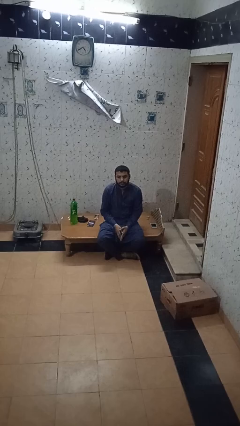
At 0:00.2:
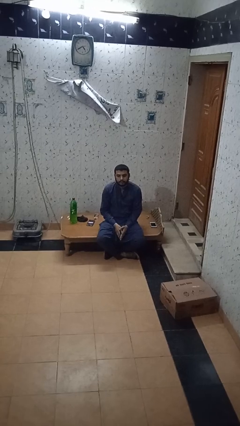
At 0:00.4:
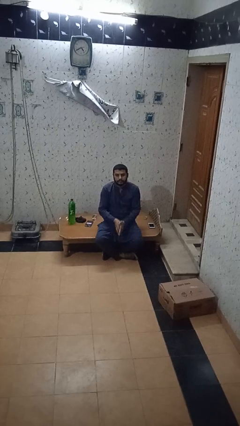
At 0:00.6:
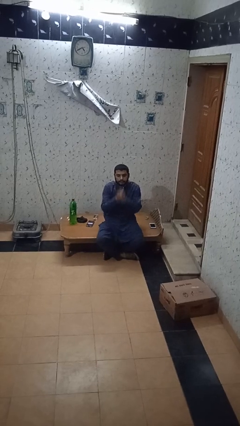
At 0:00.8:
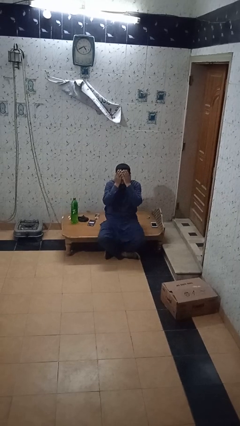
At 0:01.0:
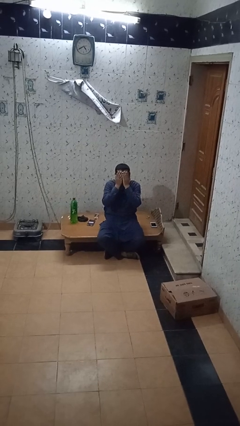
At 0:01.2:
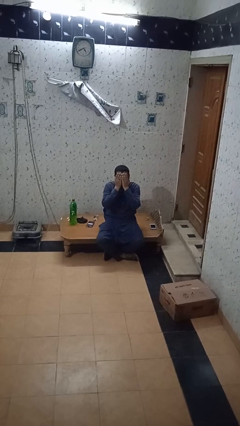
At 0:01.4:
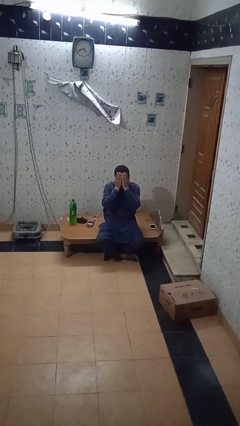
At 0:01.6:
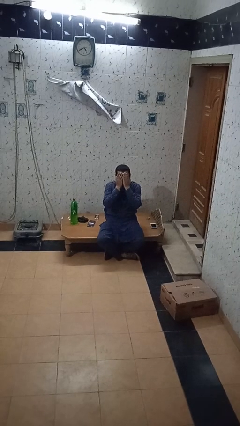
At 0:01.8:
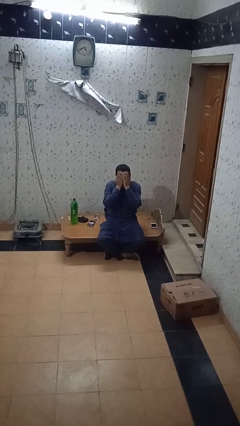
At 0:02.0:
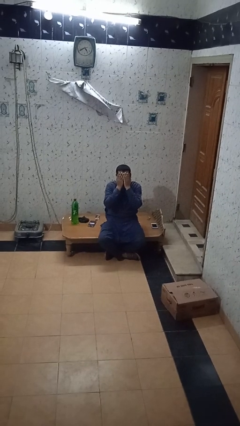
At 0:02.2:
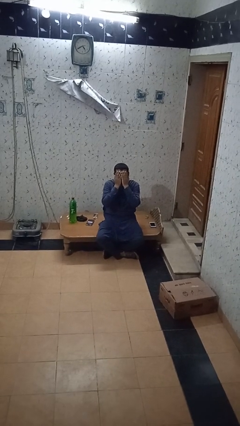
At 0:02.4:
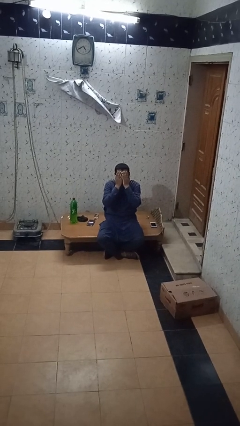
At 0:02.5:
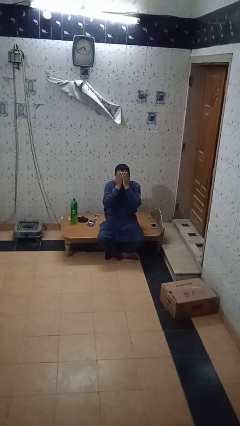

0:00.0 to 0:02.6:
person covers face with hands

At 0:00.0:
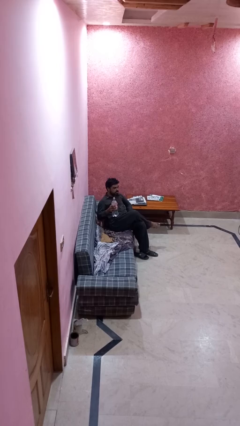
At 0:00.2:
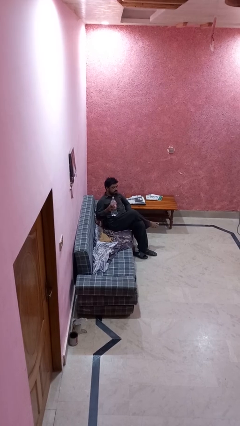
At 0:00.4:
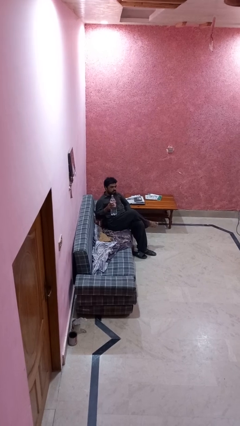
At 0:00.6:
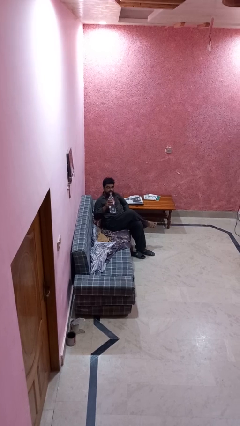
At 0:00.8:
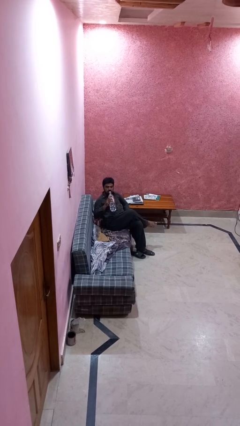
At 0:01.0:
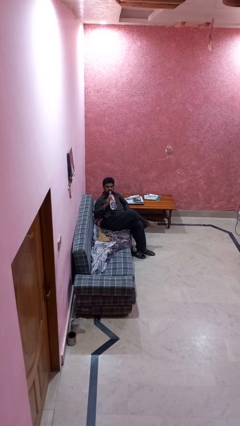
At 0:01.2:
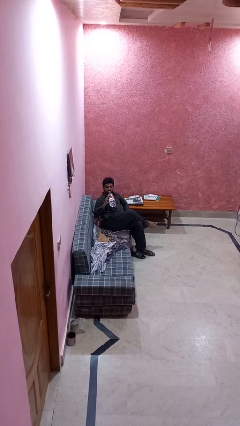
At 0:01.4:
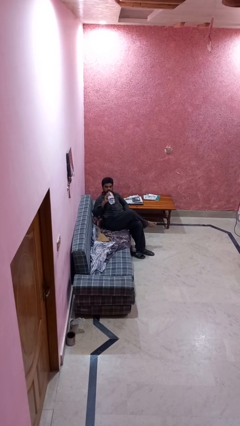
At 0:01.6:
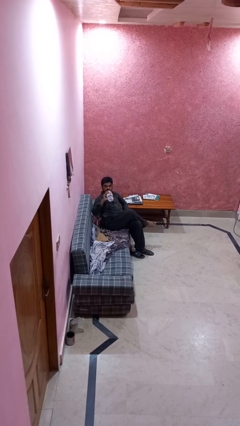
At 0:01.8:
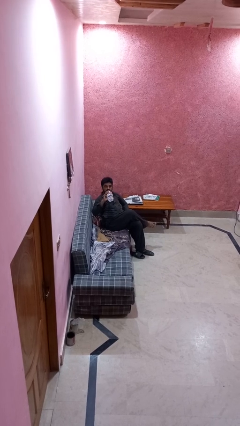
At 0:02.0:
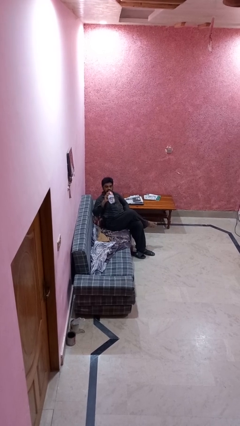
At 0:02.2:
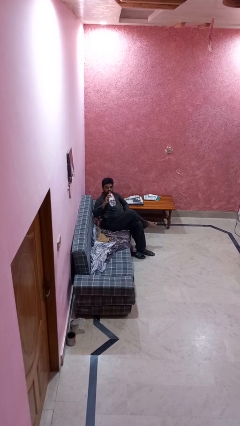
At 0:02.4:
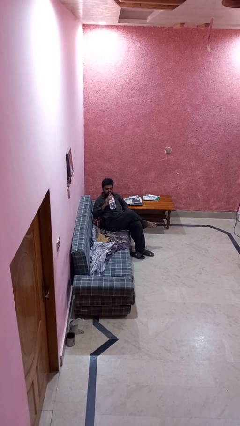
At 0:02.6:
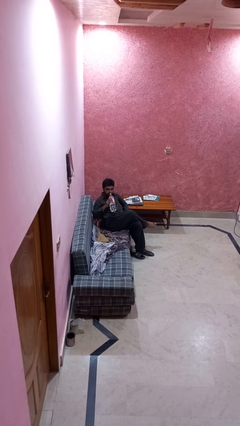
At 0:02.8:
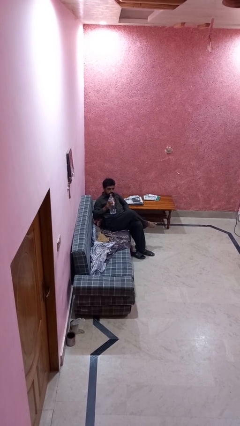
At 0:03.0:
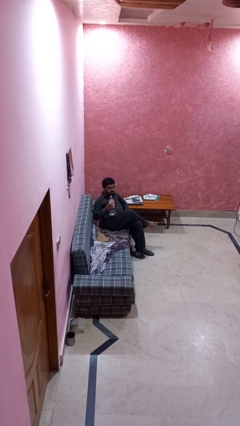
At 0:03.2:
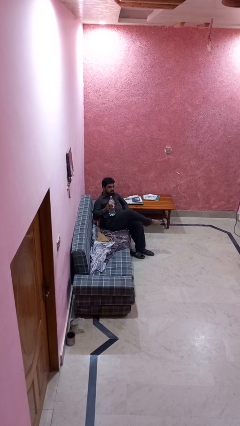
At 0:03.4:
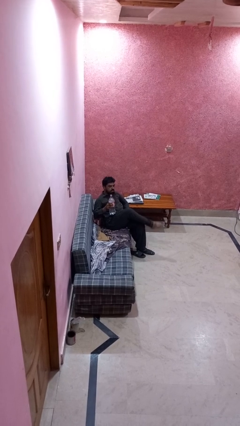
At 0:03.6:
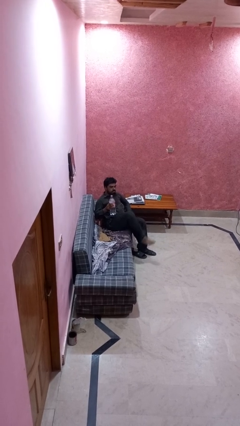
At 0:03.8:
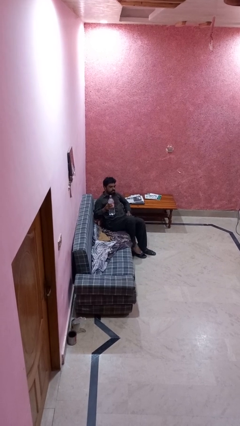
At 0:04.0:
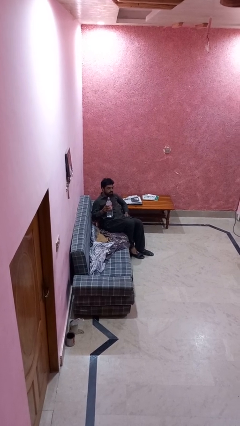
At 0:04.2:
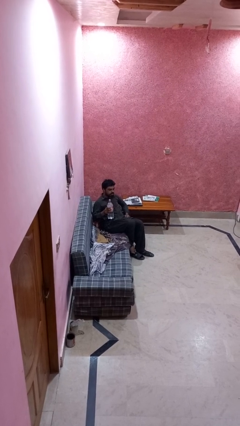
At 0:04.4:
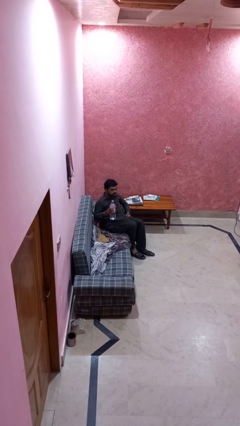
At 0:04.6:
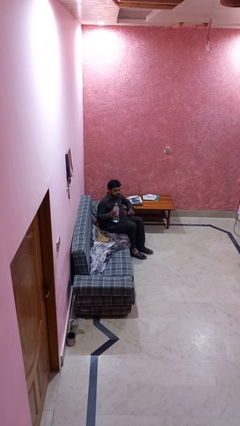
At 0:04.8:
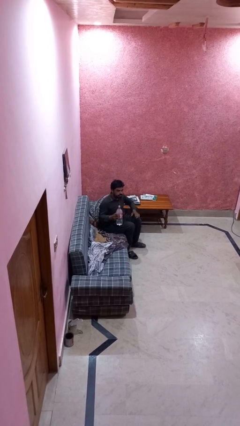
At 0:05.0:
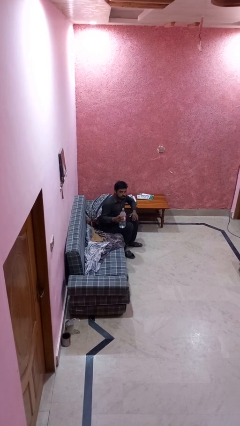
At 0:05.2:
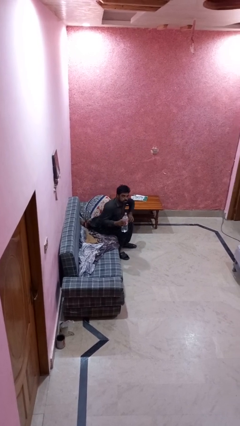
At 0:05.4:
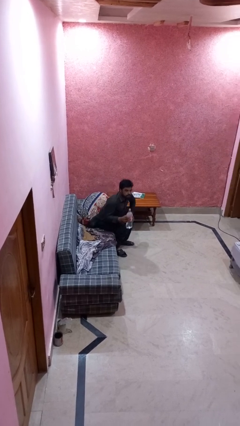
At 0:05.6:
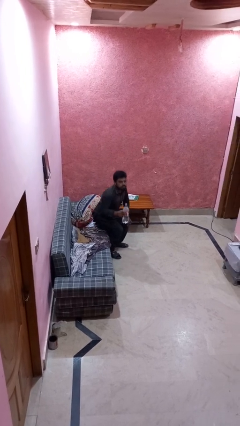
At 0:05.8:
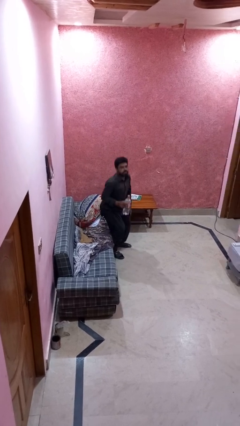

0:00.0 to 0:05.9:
person drinks from bottle

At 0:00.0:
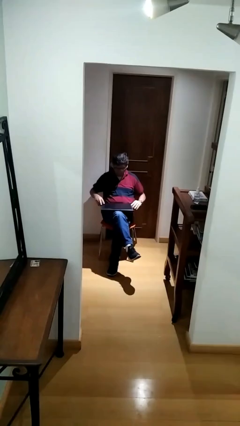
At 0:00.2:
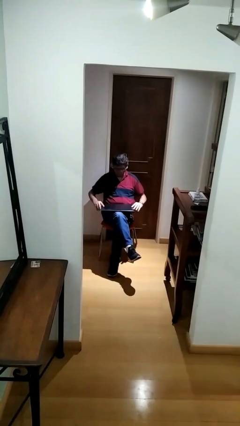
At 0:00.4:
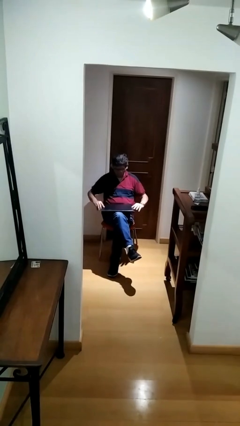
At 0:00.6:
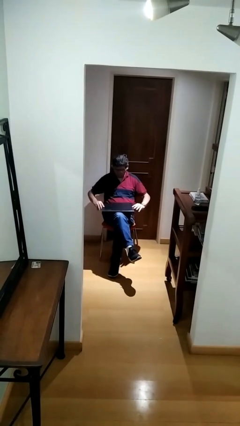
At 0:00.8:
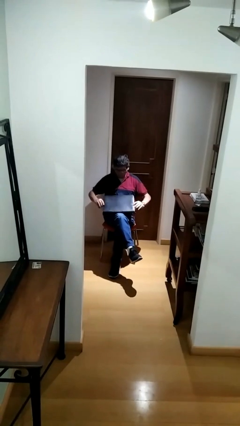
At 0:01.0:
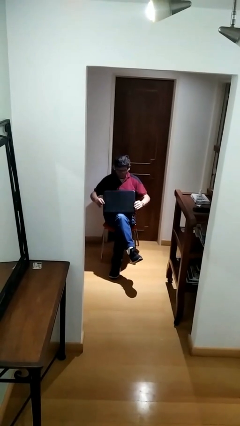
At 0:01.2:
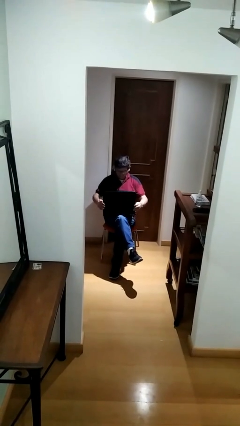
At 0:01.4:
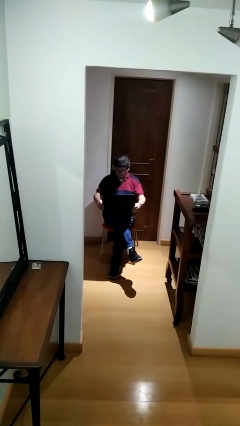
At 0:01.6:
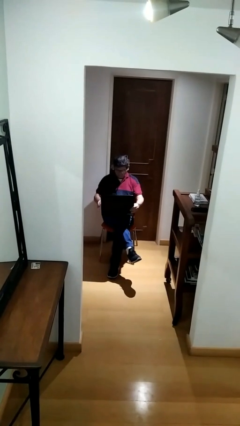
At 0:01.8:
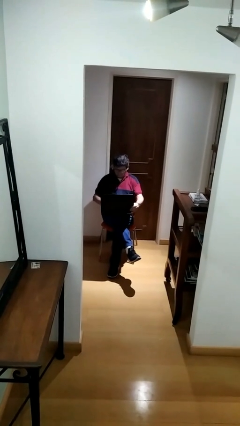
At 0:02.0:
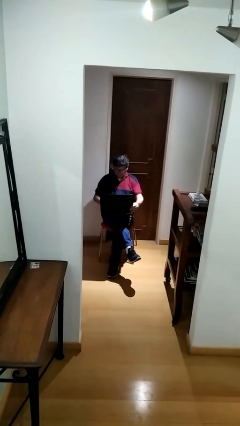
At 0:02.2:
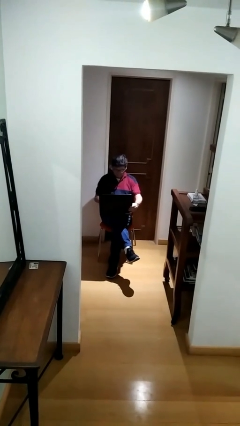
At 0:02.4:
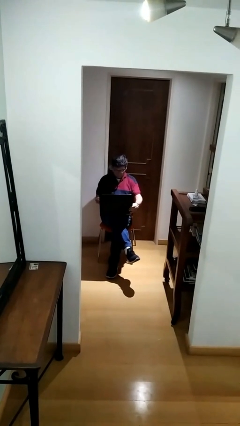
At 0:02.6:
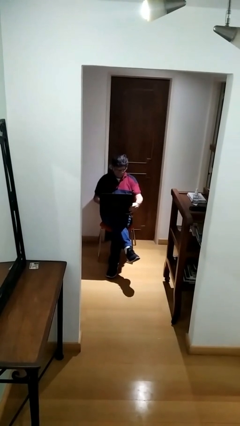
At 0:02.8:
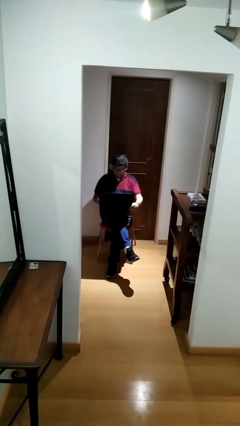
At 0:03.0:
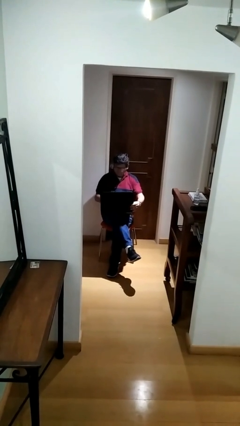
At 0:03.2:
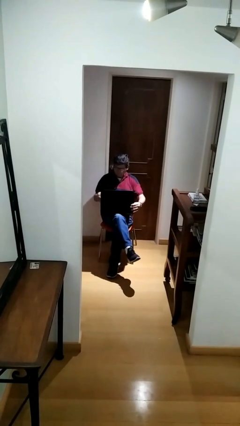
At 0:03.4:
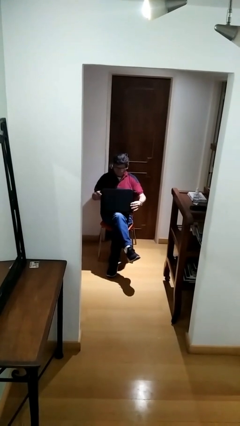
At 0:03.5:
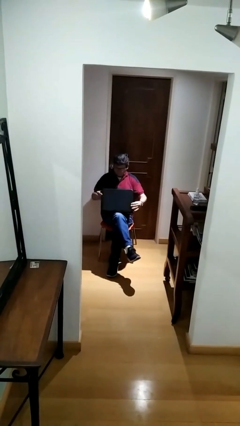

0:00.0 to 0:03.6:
person interacts with laptop

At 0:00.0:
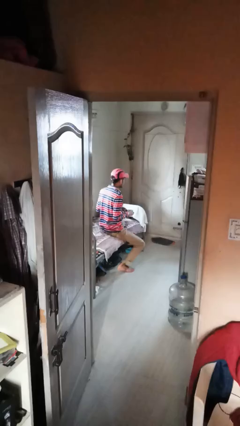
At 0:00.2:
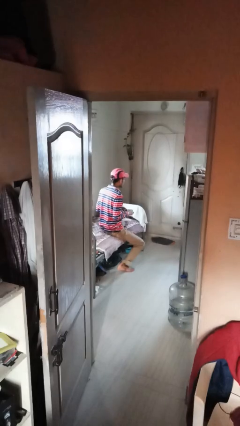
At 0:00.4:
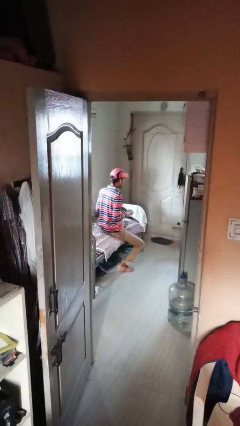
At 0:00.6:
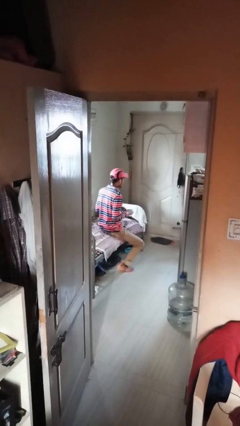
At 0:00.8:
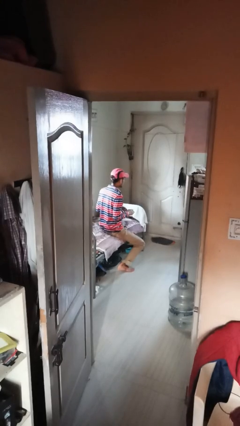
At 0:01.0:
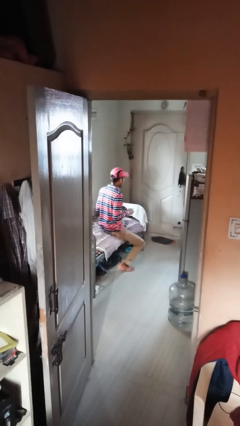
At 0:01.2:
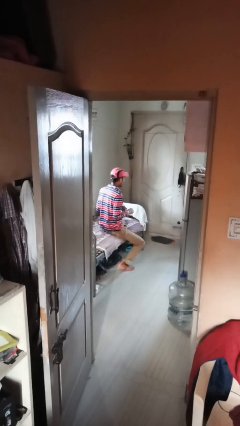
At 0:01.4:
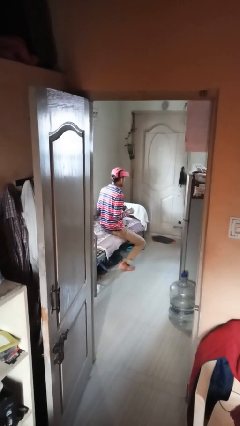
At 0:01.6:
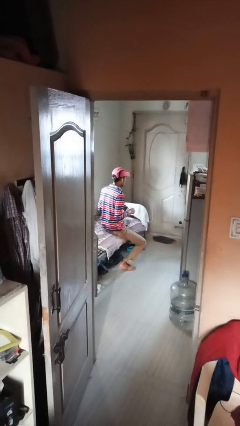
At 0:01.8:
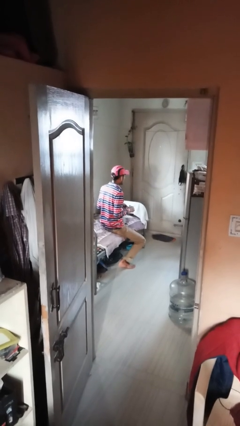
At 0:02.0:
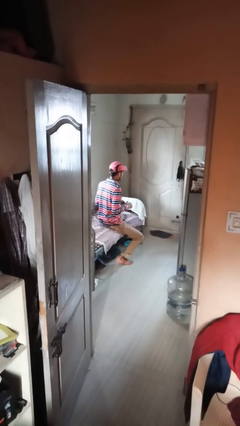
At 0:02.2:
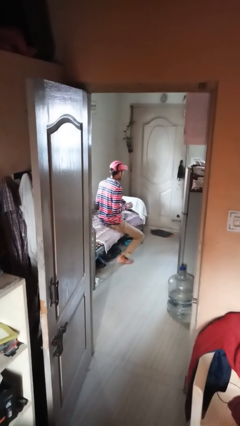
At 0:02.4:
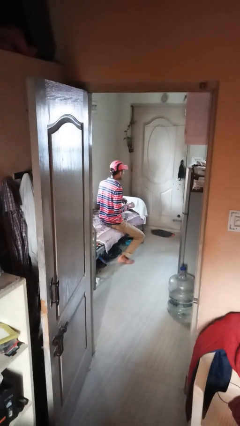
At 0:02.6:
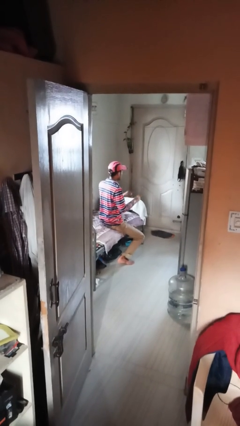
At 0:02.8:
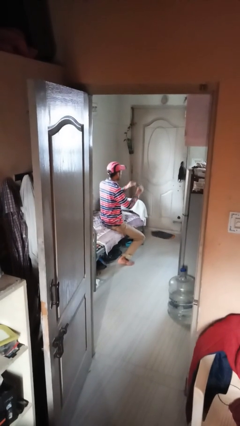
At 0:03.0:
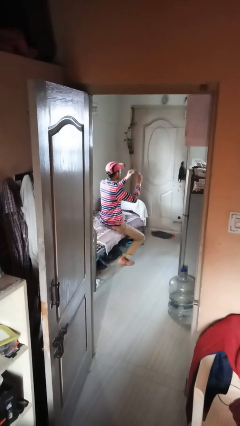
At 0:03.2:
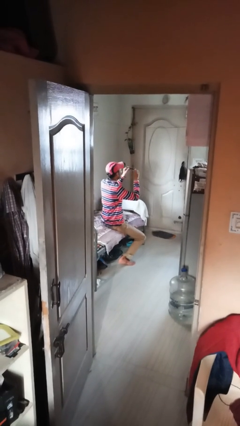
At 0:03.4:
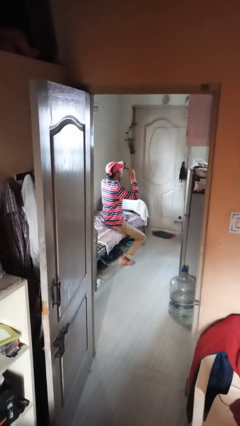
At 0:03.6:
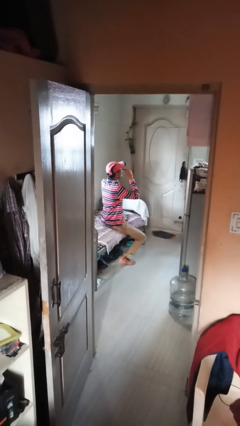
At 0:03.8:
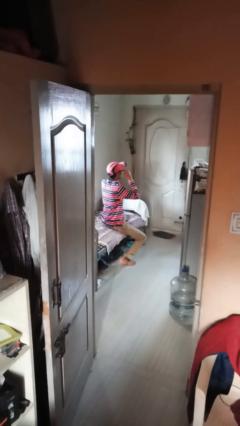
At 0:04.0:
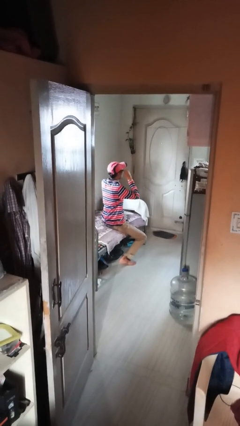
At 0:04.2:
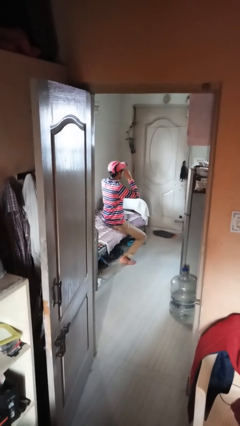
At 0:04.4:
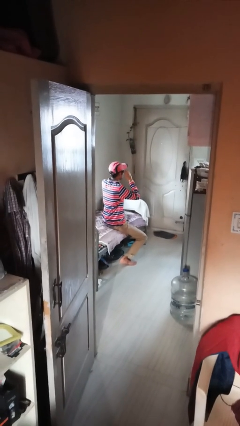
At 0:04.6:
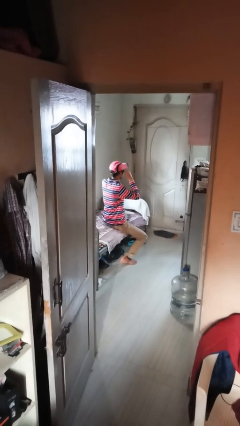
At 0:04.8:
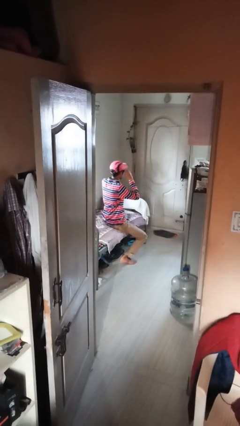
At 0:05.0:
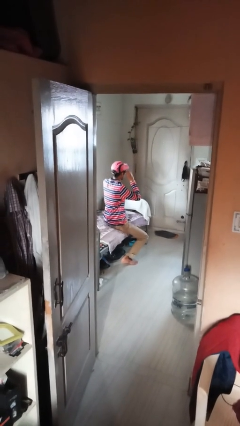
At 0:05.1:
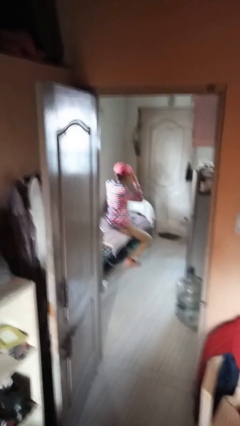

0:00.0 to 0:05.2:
person puts on glasses
